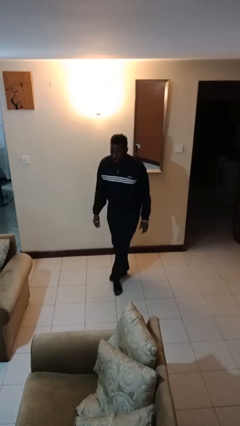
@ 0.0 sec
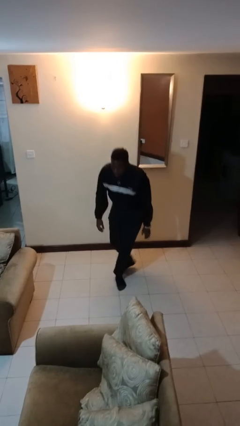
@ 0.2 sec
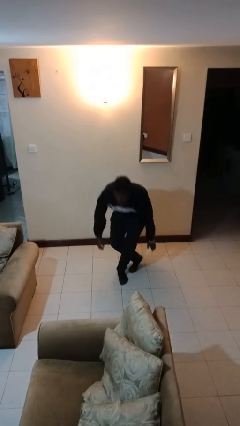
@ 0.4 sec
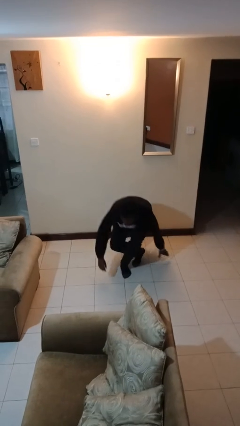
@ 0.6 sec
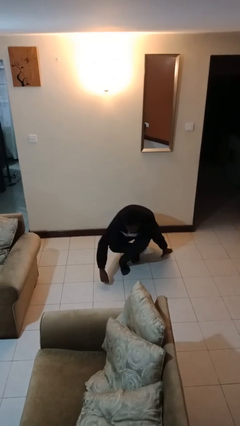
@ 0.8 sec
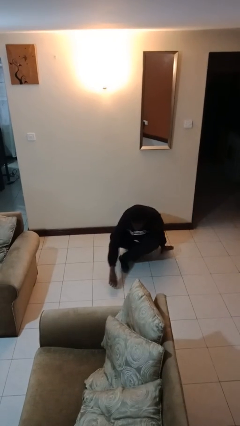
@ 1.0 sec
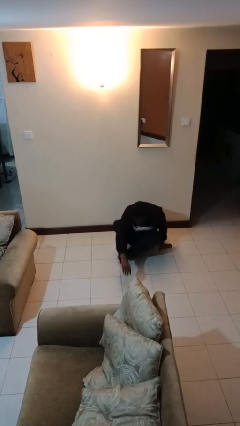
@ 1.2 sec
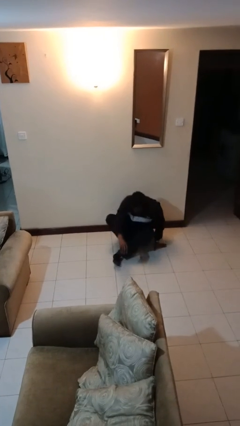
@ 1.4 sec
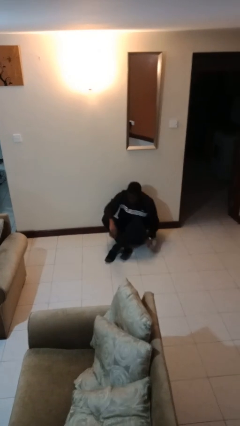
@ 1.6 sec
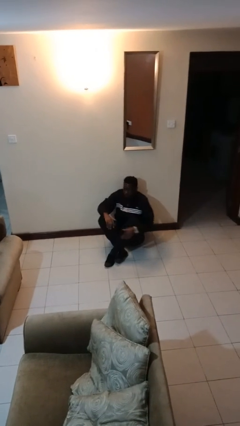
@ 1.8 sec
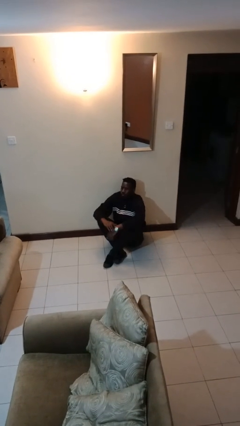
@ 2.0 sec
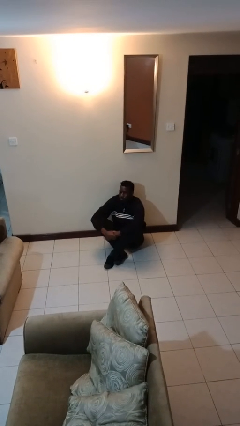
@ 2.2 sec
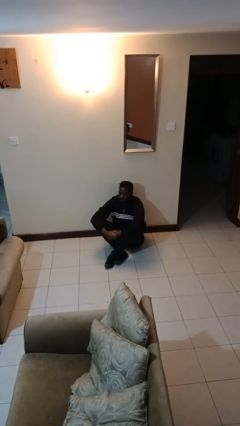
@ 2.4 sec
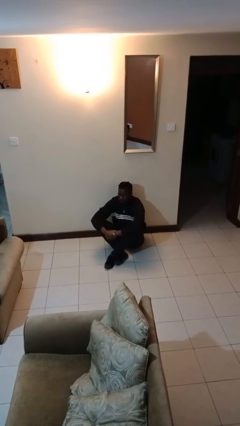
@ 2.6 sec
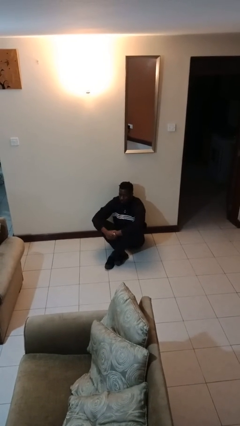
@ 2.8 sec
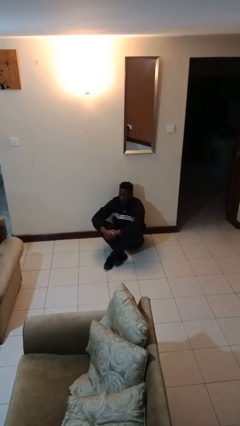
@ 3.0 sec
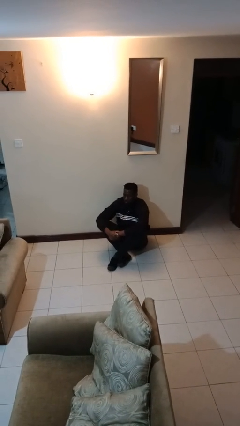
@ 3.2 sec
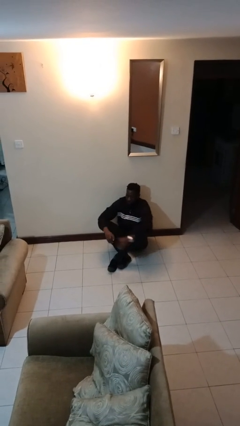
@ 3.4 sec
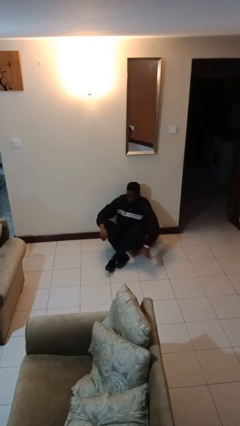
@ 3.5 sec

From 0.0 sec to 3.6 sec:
person sits crisscross

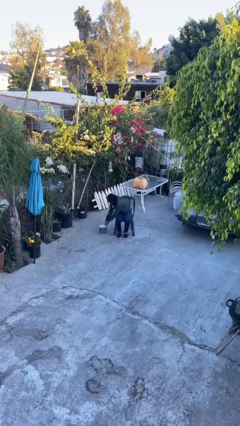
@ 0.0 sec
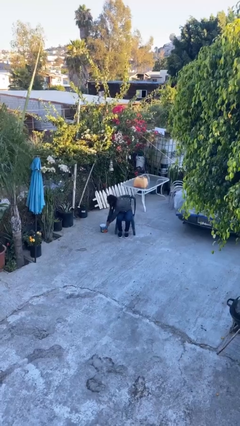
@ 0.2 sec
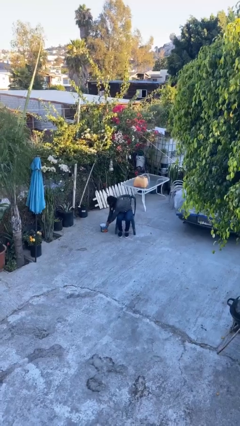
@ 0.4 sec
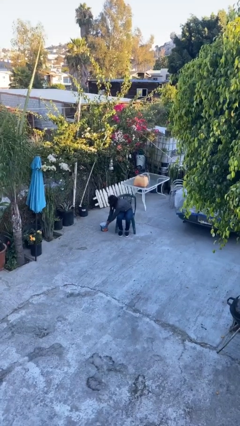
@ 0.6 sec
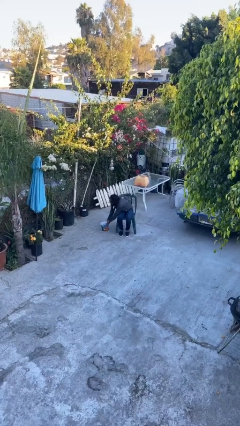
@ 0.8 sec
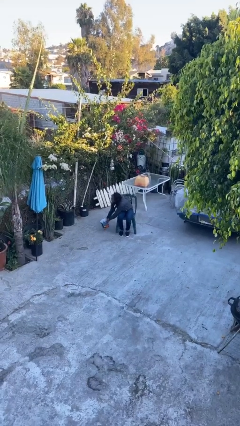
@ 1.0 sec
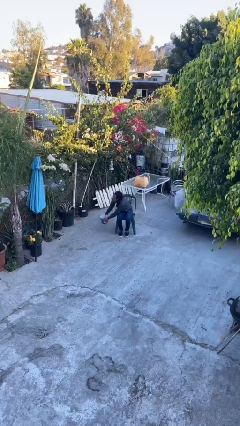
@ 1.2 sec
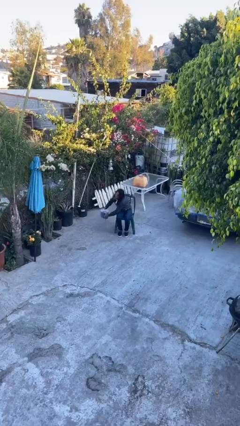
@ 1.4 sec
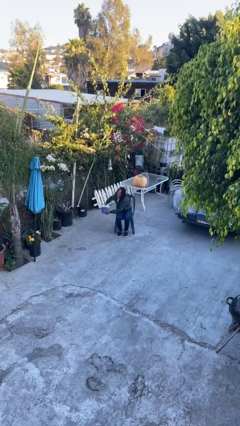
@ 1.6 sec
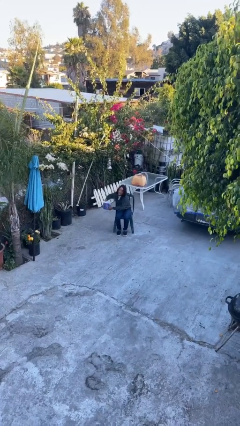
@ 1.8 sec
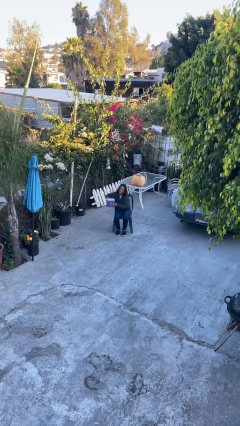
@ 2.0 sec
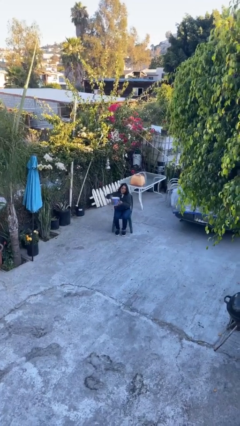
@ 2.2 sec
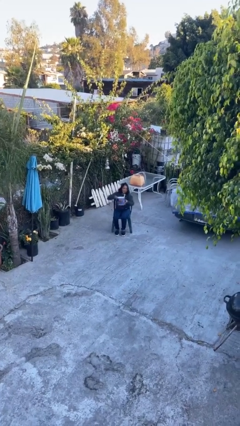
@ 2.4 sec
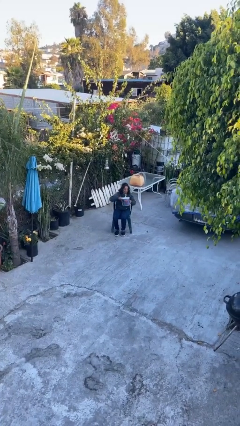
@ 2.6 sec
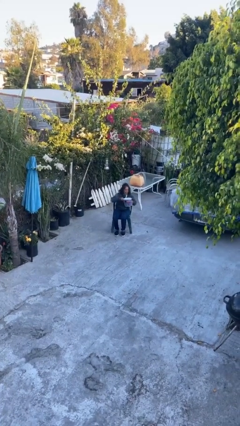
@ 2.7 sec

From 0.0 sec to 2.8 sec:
person picks up object from floor

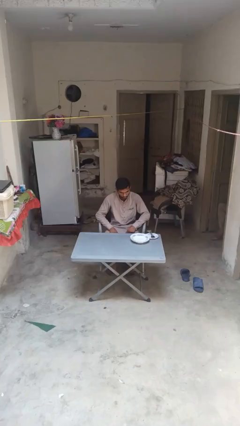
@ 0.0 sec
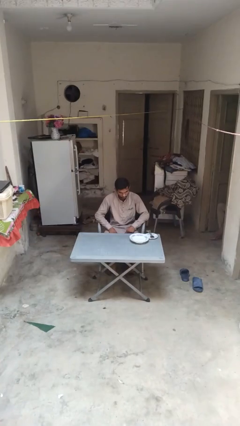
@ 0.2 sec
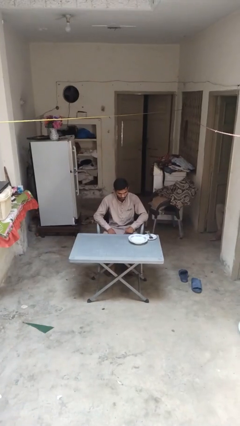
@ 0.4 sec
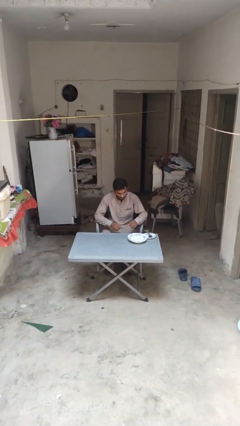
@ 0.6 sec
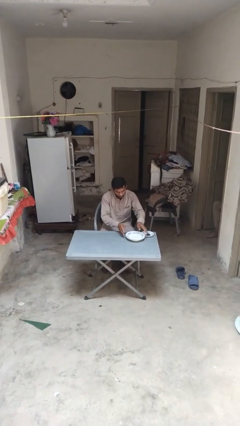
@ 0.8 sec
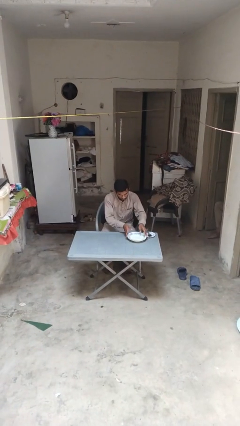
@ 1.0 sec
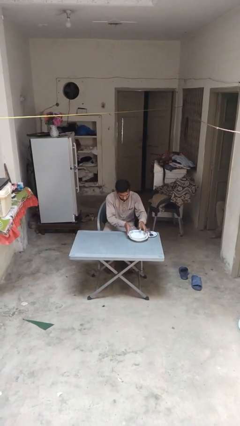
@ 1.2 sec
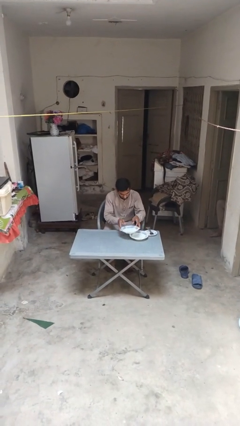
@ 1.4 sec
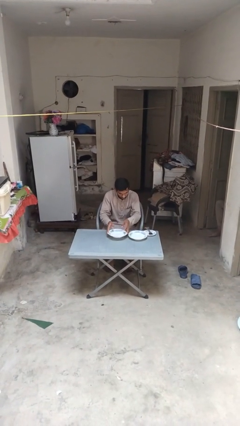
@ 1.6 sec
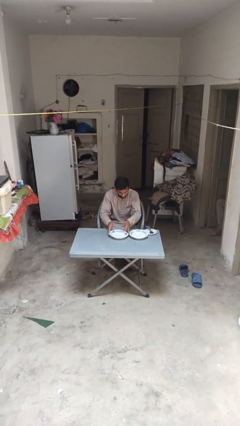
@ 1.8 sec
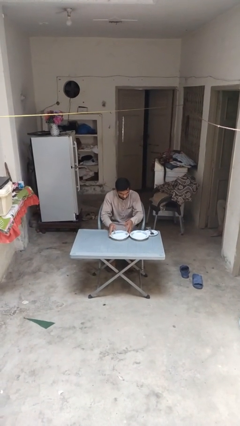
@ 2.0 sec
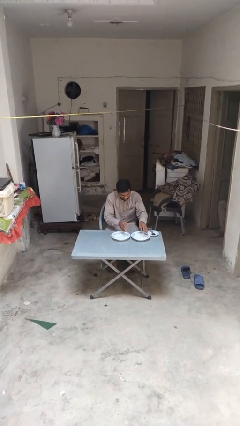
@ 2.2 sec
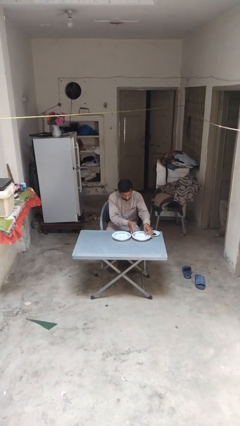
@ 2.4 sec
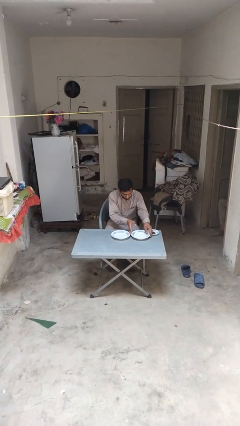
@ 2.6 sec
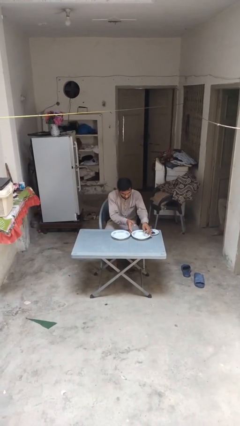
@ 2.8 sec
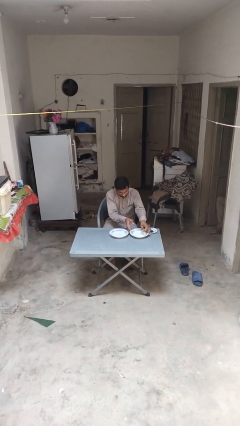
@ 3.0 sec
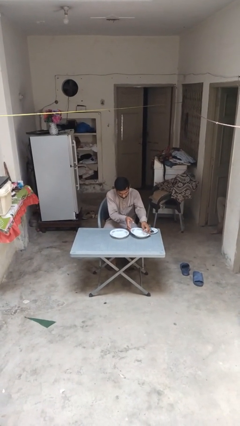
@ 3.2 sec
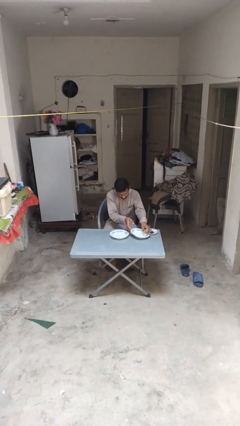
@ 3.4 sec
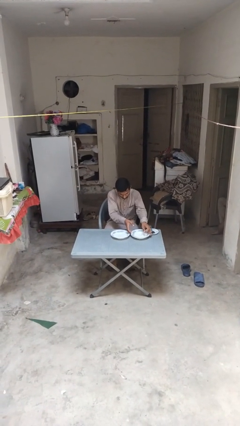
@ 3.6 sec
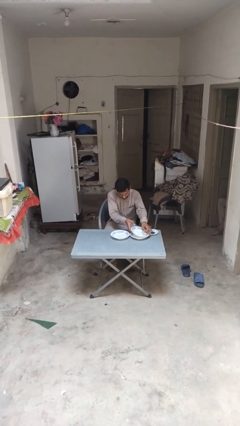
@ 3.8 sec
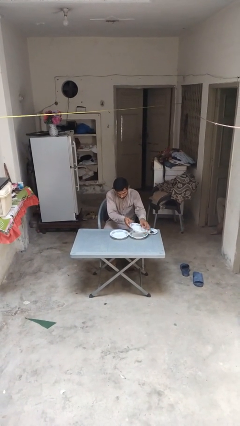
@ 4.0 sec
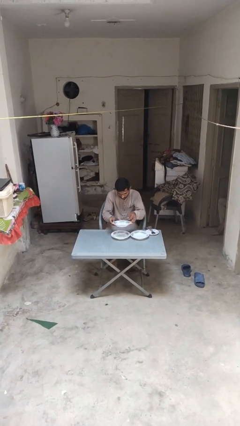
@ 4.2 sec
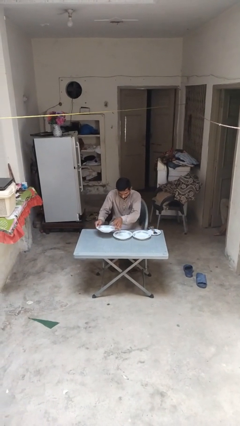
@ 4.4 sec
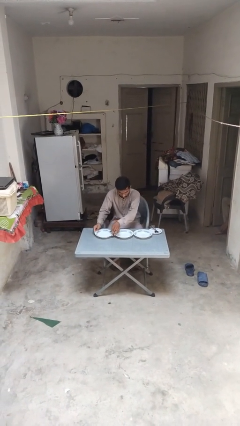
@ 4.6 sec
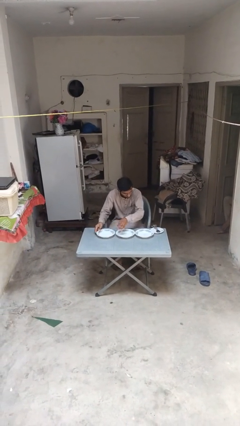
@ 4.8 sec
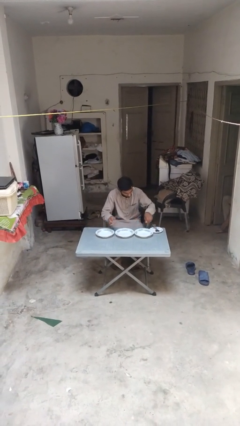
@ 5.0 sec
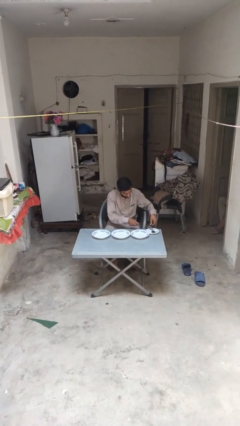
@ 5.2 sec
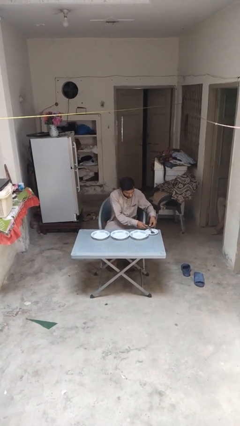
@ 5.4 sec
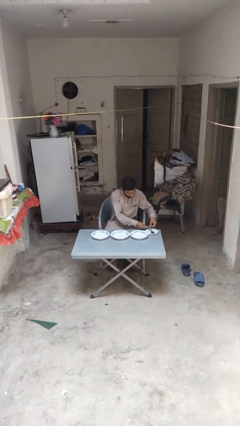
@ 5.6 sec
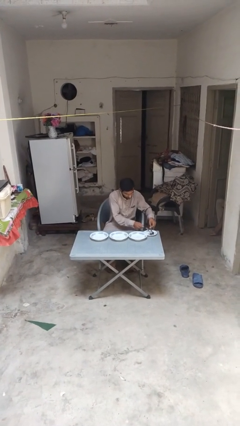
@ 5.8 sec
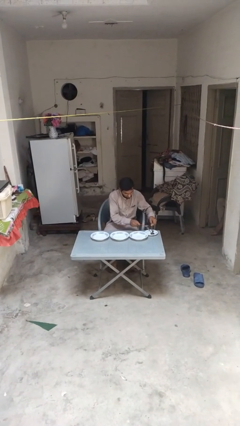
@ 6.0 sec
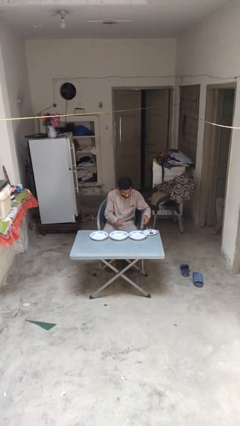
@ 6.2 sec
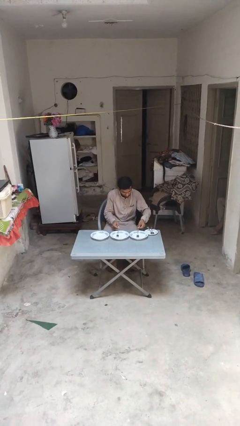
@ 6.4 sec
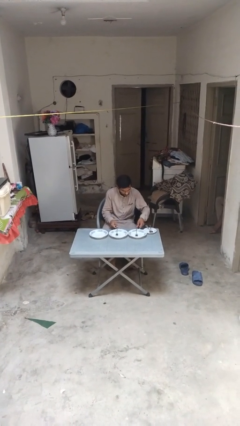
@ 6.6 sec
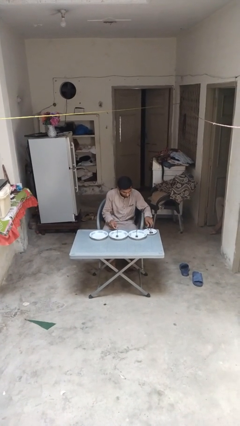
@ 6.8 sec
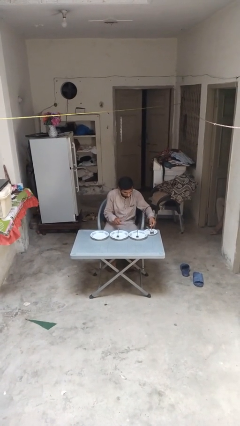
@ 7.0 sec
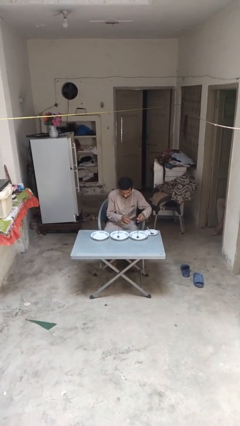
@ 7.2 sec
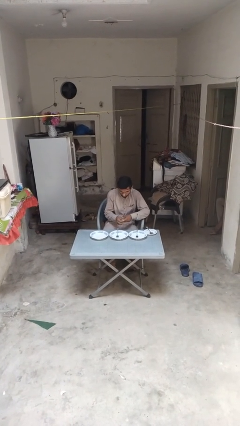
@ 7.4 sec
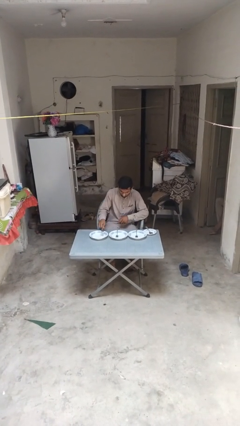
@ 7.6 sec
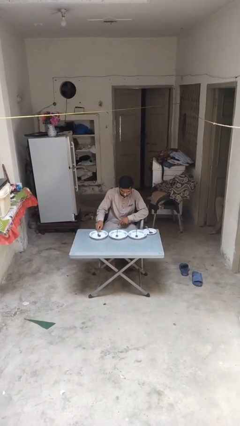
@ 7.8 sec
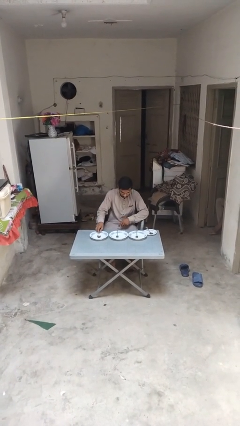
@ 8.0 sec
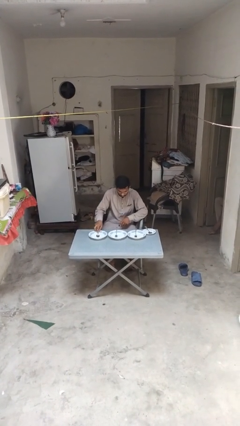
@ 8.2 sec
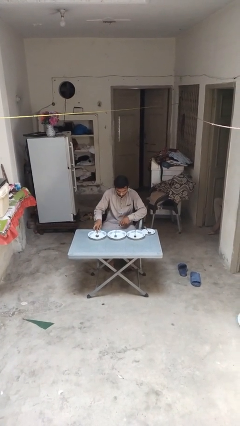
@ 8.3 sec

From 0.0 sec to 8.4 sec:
person sets table

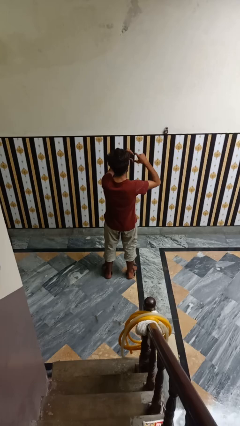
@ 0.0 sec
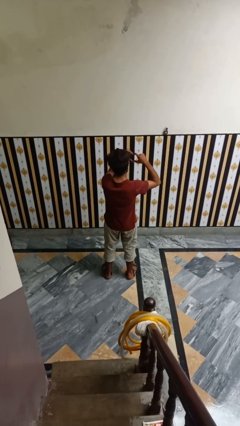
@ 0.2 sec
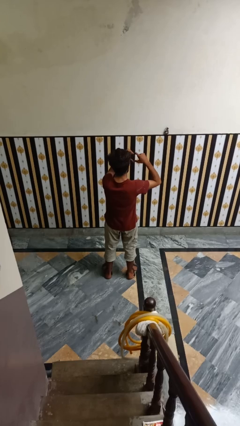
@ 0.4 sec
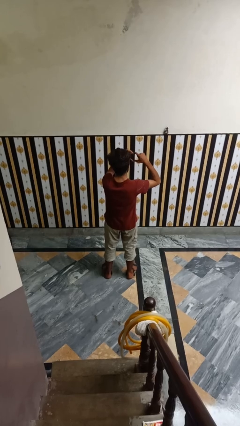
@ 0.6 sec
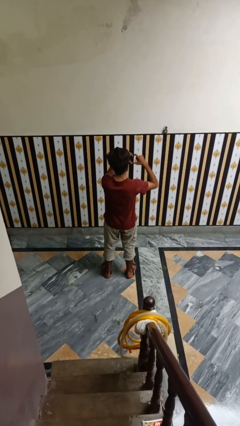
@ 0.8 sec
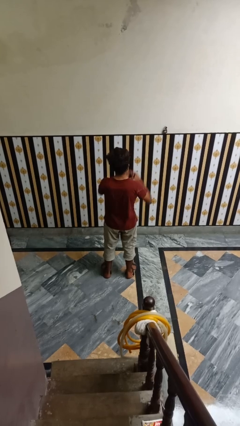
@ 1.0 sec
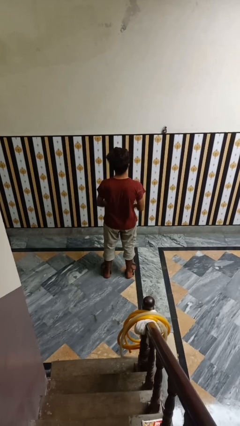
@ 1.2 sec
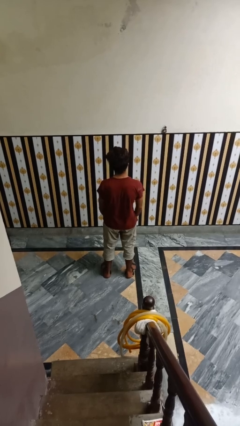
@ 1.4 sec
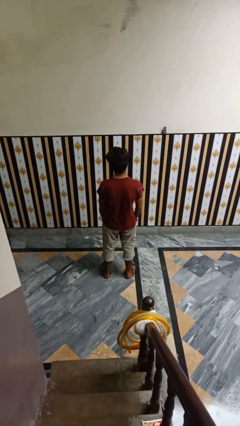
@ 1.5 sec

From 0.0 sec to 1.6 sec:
person gestures heart

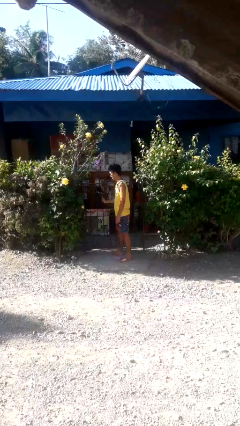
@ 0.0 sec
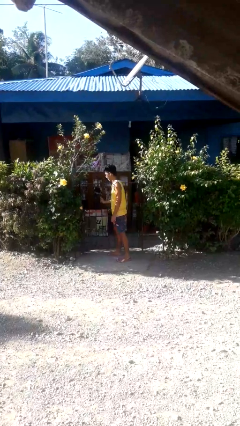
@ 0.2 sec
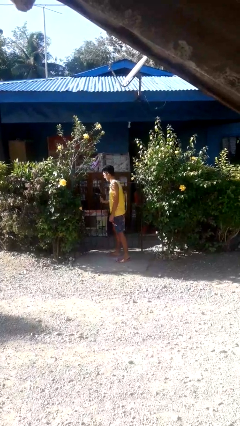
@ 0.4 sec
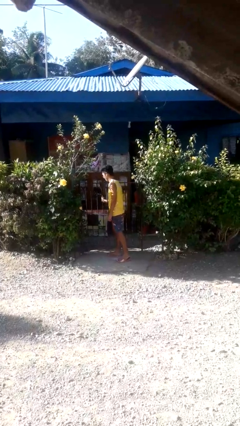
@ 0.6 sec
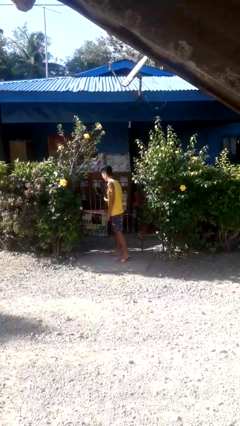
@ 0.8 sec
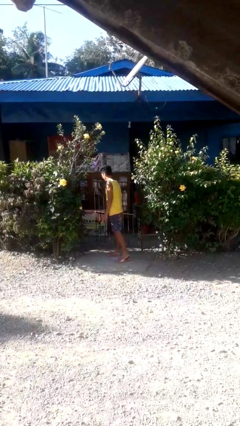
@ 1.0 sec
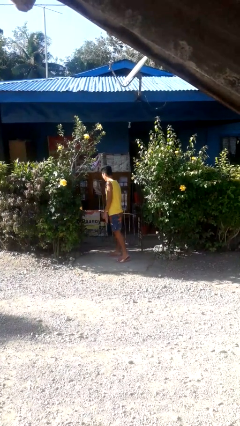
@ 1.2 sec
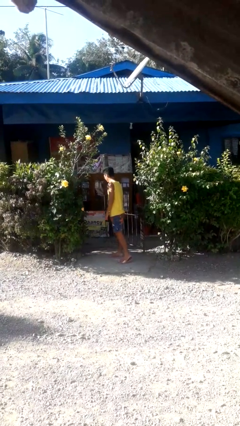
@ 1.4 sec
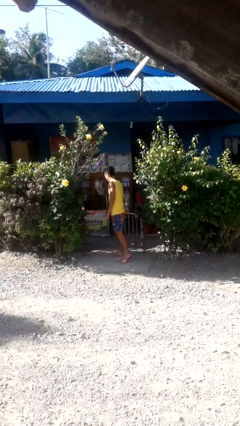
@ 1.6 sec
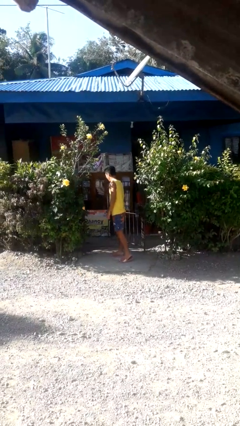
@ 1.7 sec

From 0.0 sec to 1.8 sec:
person opens gate
